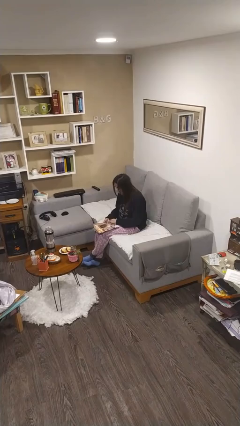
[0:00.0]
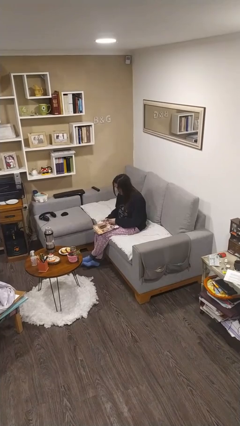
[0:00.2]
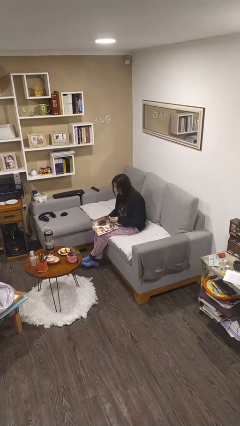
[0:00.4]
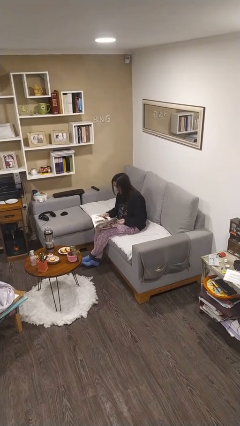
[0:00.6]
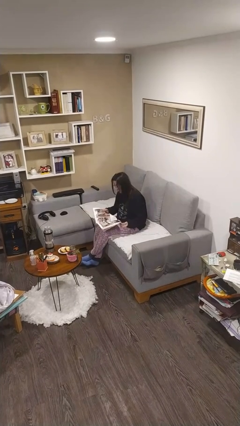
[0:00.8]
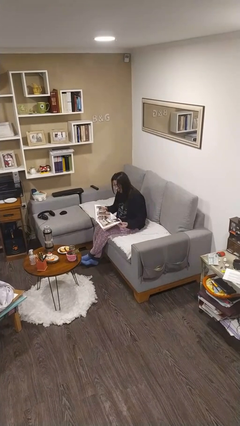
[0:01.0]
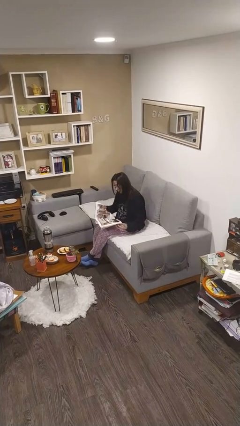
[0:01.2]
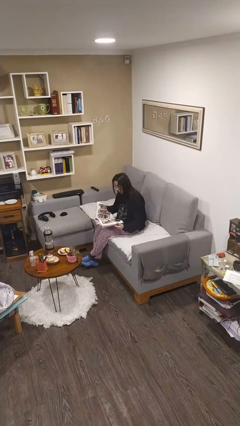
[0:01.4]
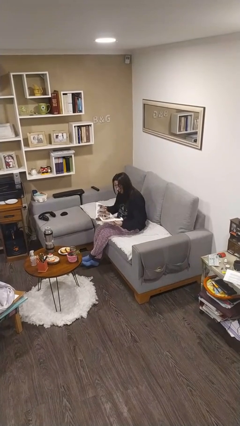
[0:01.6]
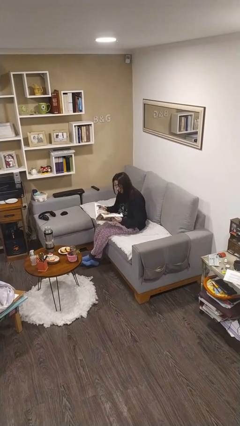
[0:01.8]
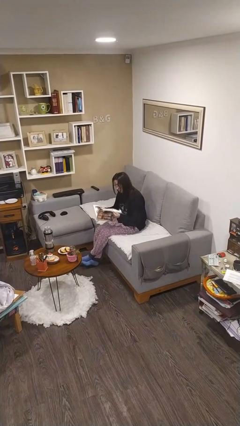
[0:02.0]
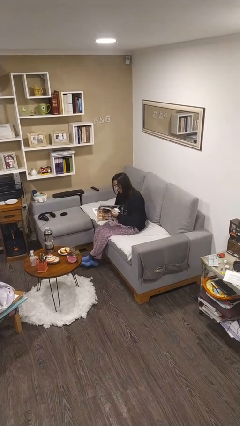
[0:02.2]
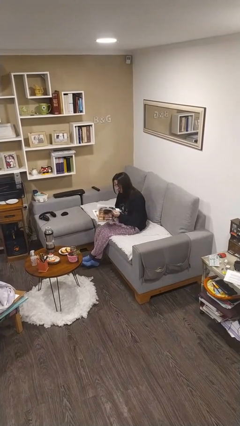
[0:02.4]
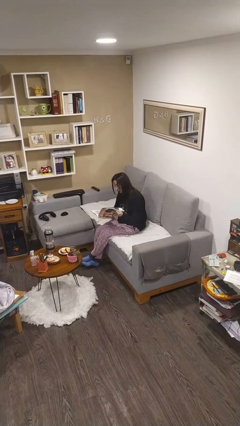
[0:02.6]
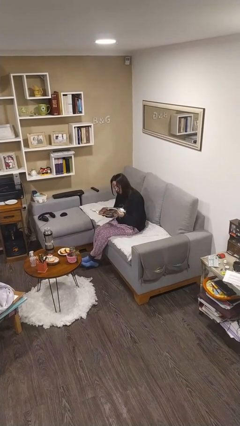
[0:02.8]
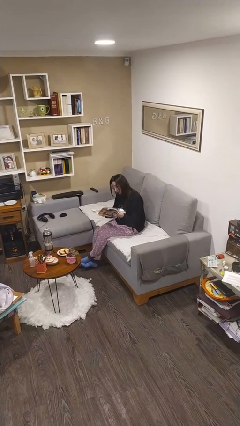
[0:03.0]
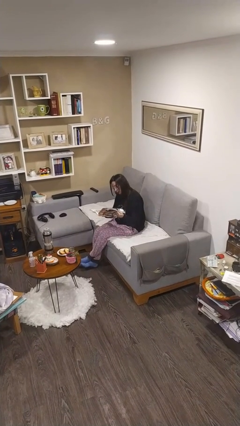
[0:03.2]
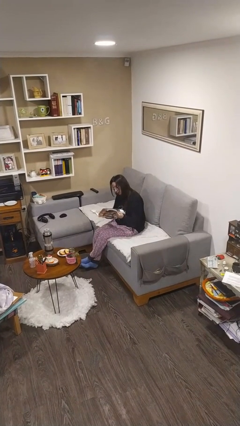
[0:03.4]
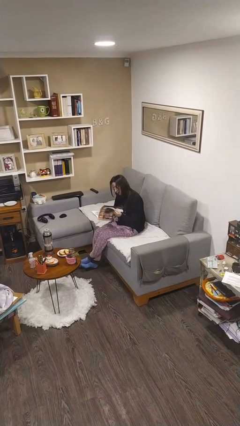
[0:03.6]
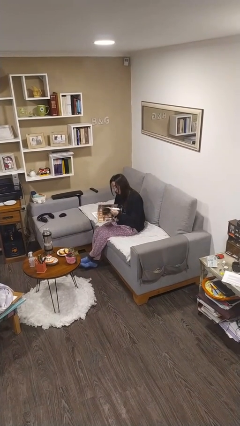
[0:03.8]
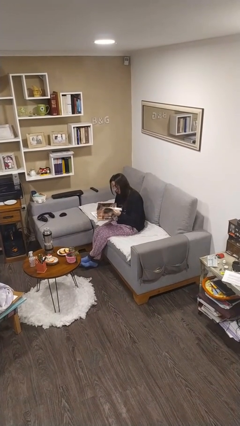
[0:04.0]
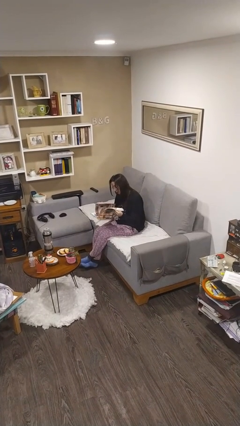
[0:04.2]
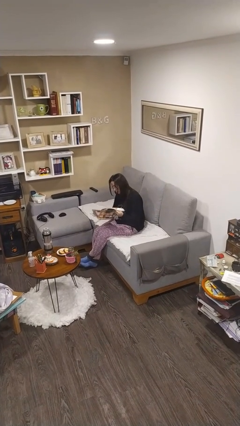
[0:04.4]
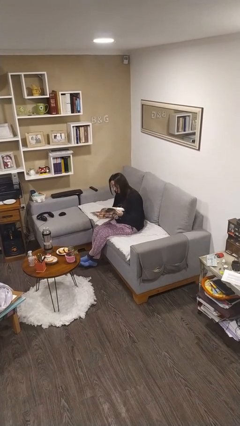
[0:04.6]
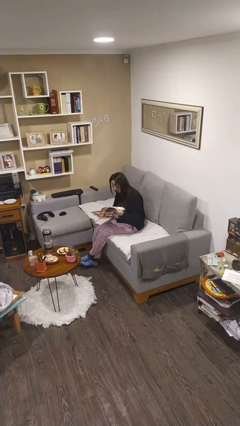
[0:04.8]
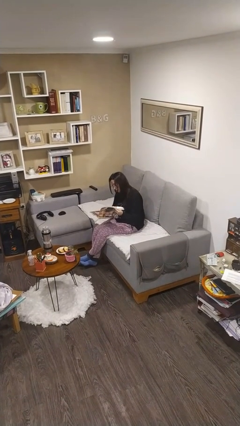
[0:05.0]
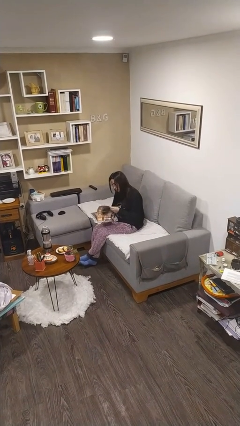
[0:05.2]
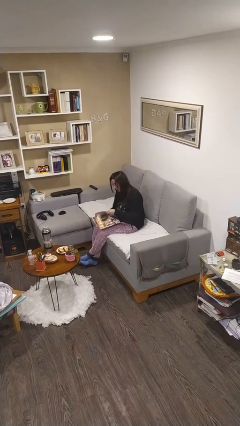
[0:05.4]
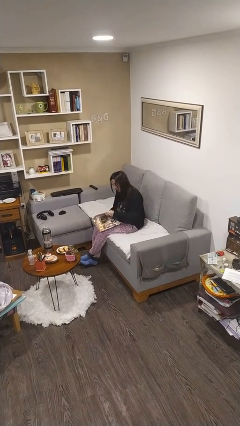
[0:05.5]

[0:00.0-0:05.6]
person reads magazine

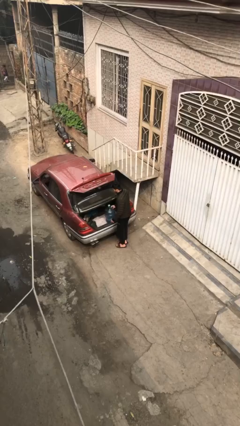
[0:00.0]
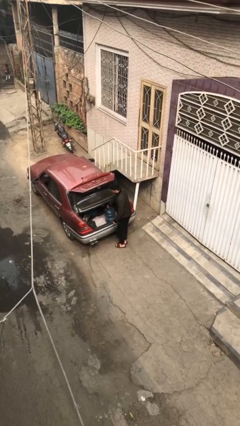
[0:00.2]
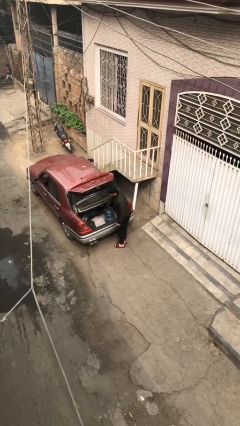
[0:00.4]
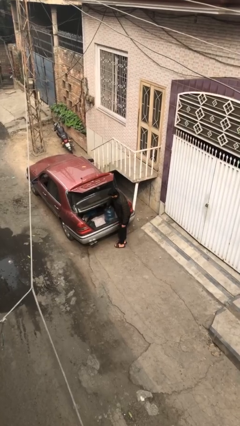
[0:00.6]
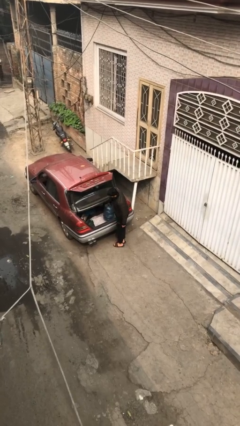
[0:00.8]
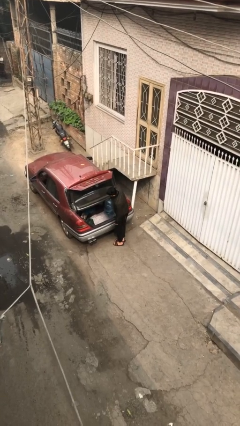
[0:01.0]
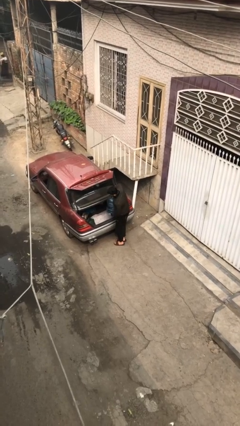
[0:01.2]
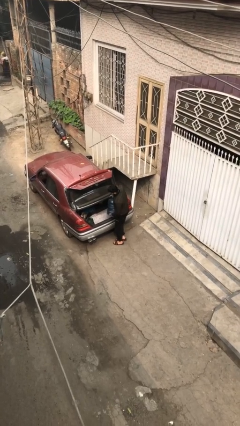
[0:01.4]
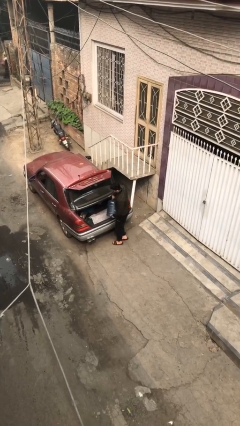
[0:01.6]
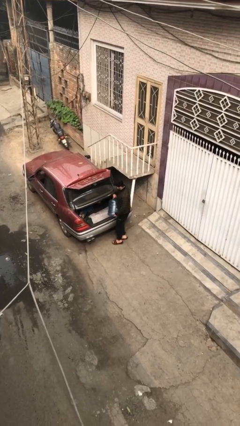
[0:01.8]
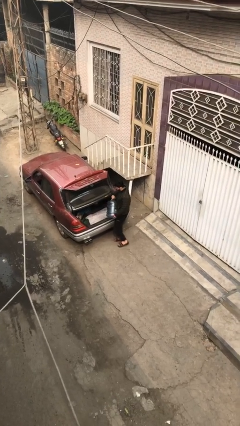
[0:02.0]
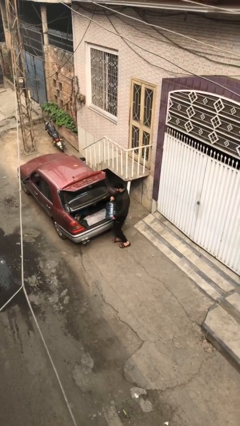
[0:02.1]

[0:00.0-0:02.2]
person unloads car

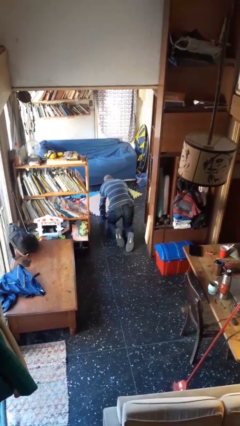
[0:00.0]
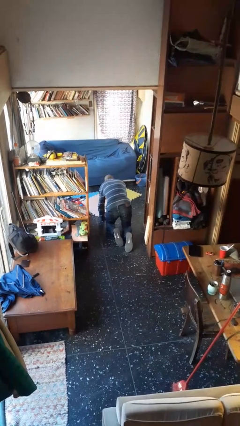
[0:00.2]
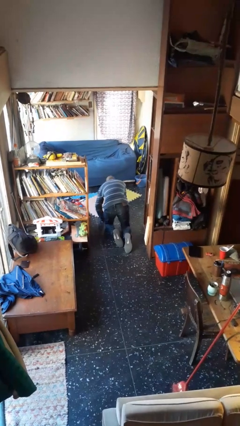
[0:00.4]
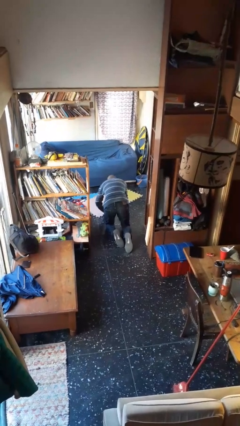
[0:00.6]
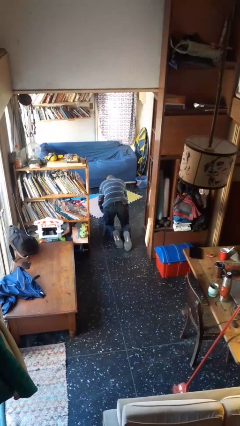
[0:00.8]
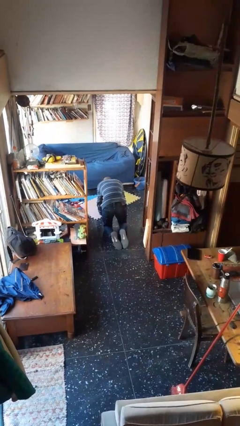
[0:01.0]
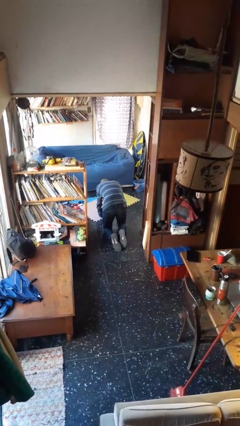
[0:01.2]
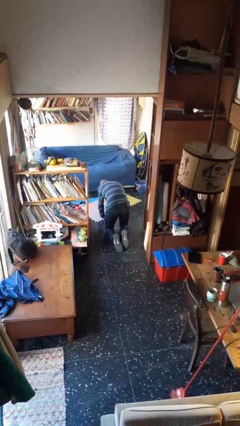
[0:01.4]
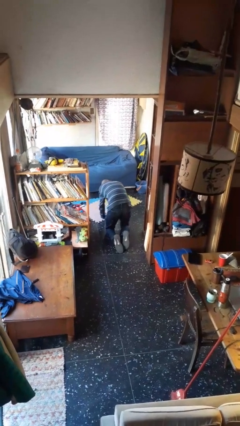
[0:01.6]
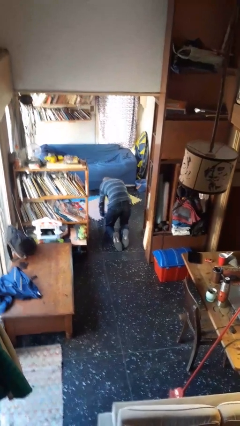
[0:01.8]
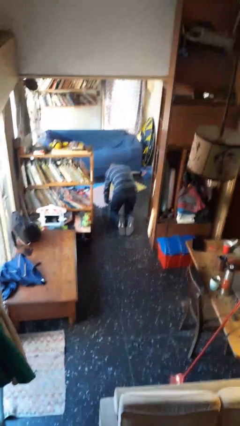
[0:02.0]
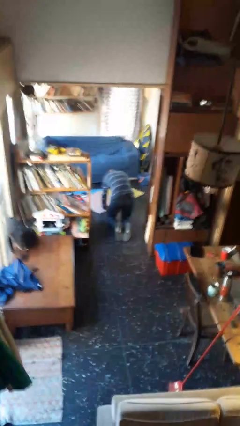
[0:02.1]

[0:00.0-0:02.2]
person crawls

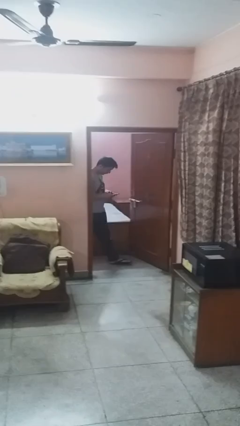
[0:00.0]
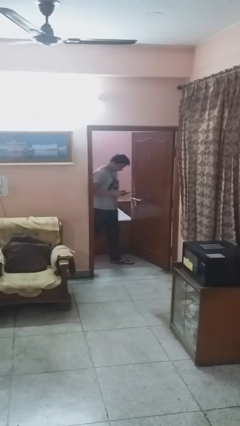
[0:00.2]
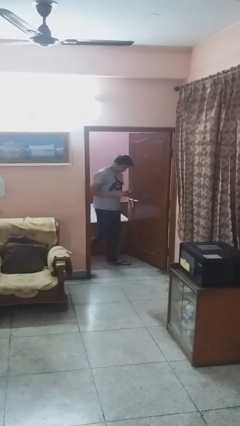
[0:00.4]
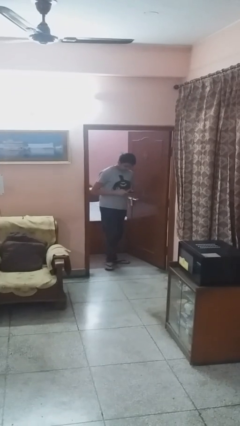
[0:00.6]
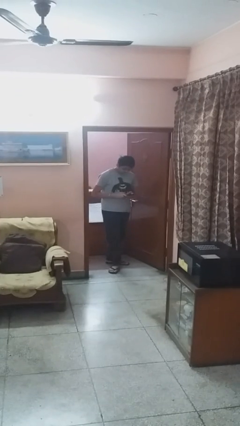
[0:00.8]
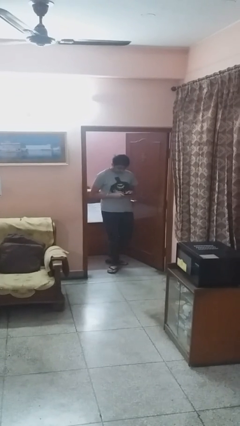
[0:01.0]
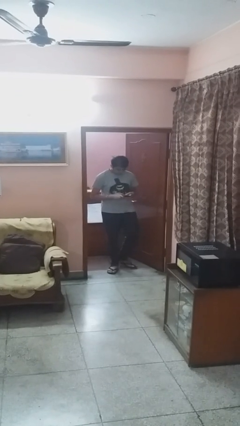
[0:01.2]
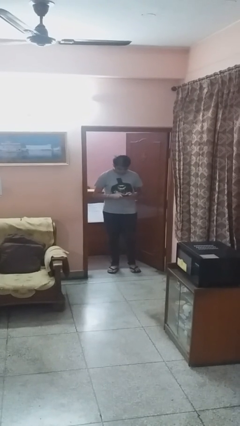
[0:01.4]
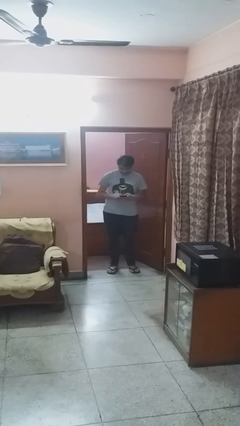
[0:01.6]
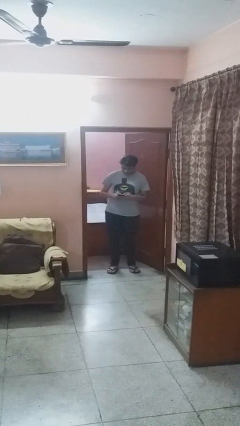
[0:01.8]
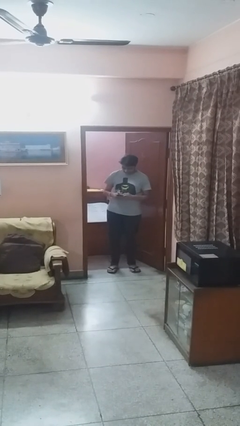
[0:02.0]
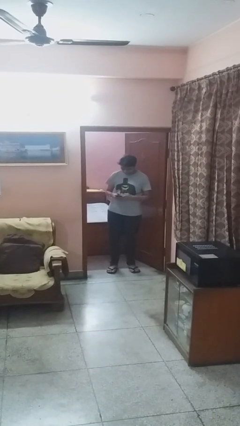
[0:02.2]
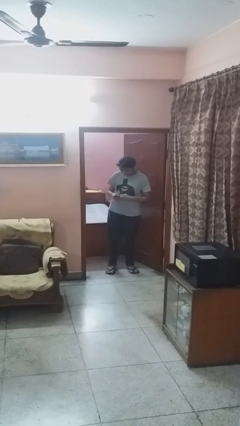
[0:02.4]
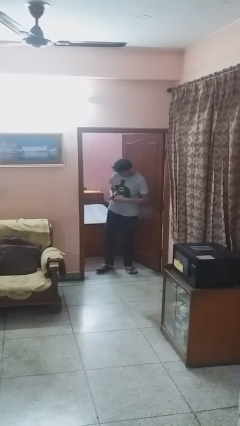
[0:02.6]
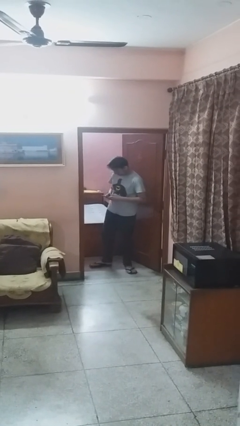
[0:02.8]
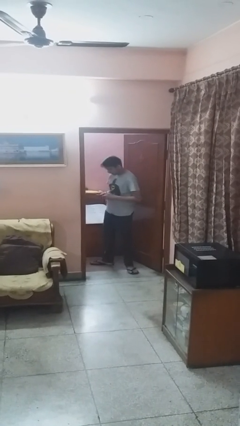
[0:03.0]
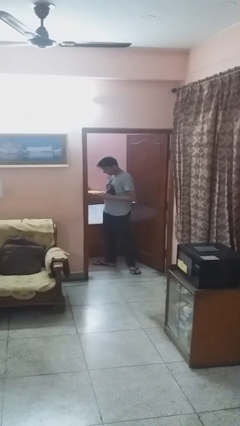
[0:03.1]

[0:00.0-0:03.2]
person enters scene through structure

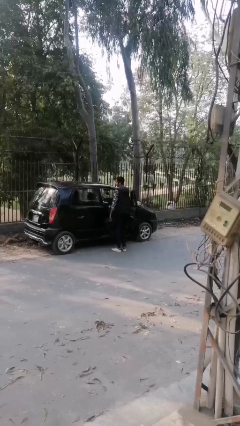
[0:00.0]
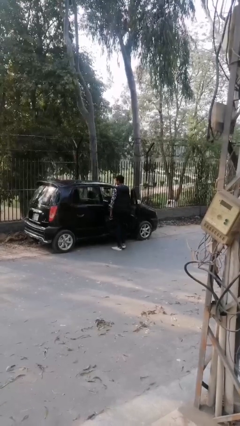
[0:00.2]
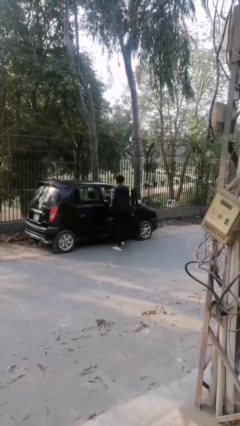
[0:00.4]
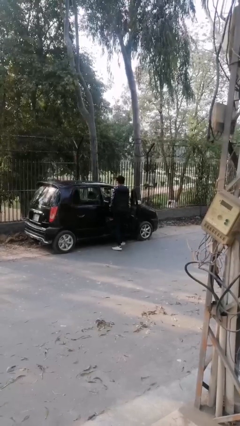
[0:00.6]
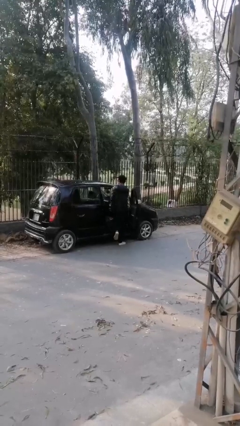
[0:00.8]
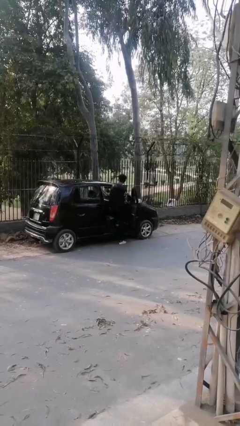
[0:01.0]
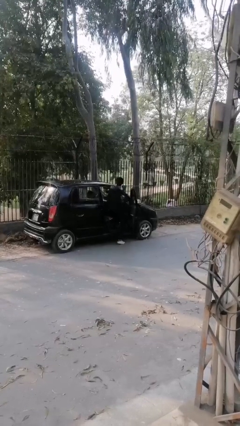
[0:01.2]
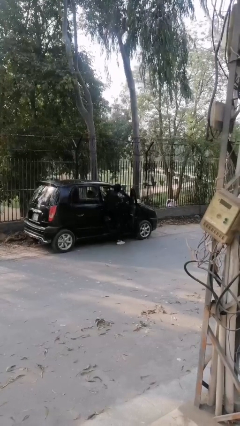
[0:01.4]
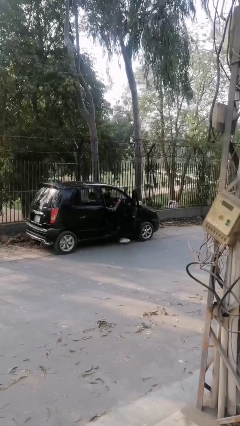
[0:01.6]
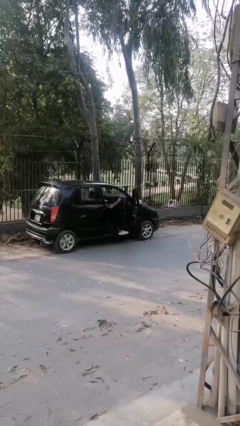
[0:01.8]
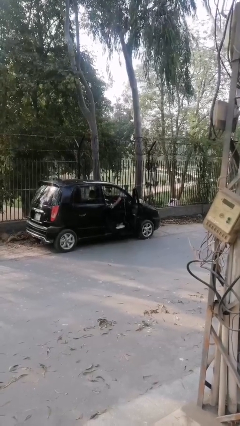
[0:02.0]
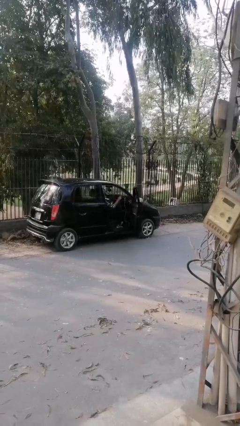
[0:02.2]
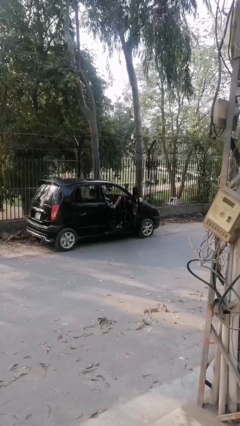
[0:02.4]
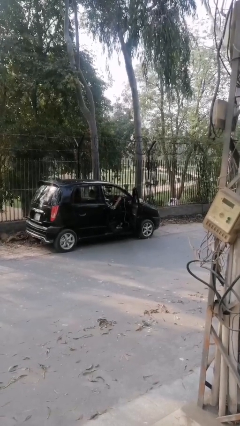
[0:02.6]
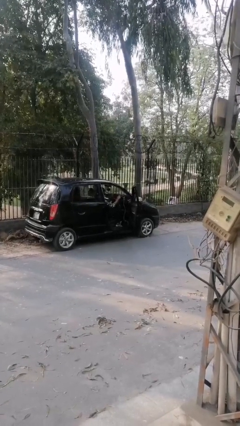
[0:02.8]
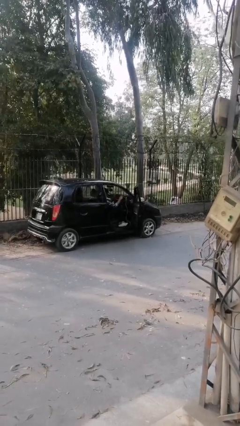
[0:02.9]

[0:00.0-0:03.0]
person enters car

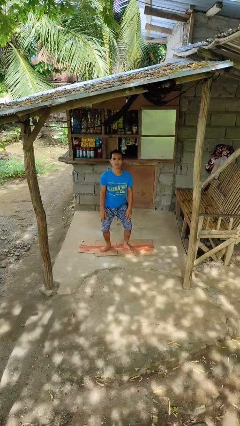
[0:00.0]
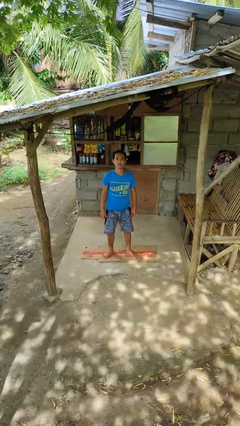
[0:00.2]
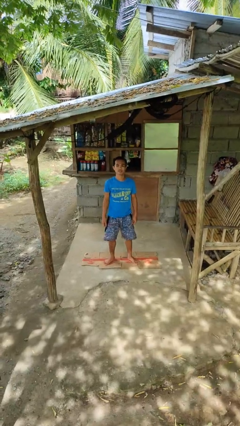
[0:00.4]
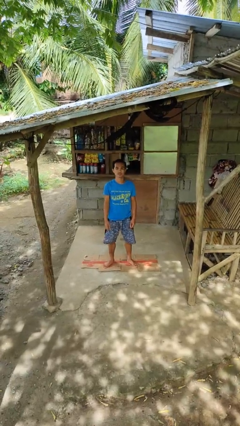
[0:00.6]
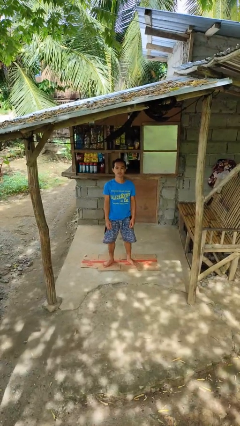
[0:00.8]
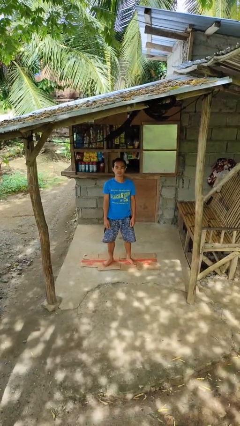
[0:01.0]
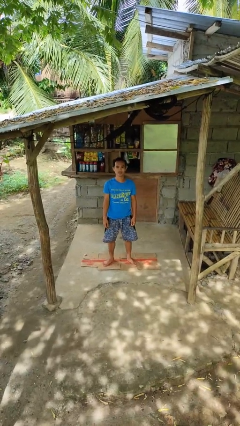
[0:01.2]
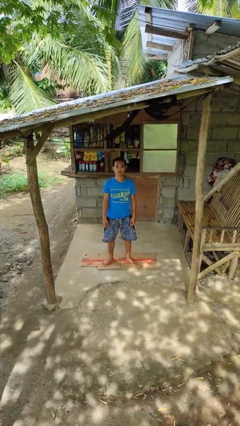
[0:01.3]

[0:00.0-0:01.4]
person stands up
